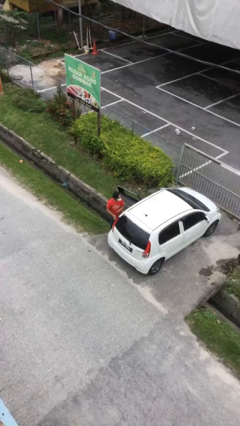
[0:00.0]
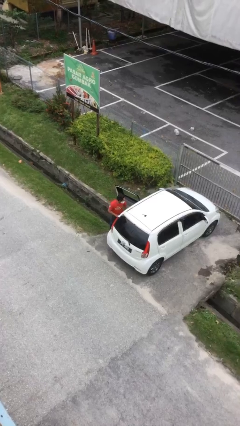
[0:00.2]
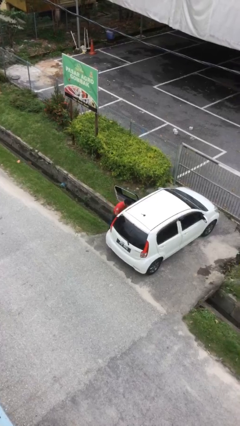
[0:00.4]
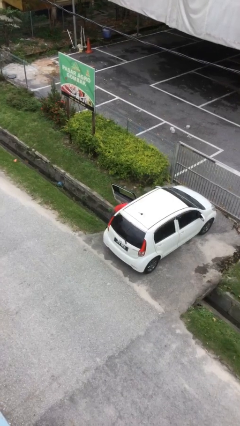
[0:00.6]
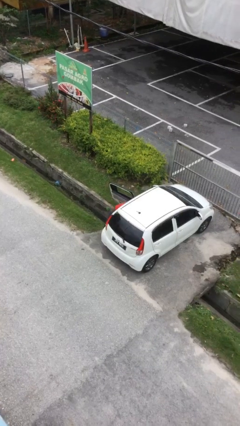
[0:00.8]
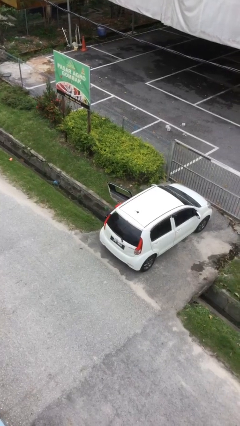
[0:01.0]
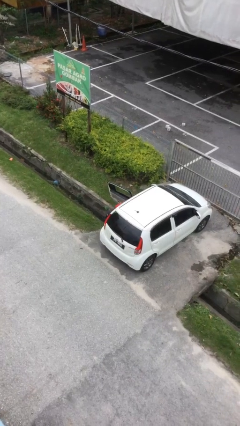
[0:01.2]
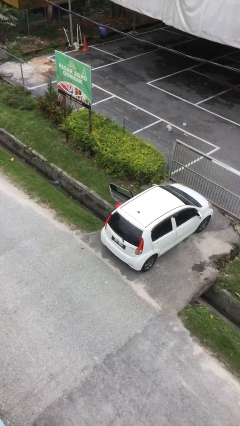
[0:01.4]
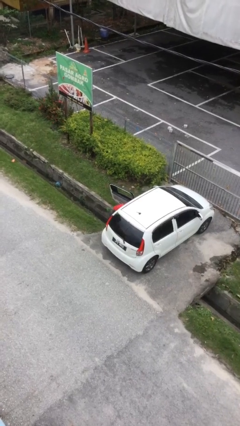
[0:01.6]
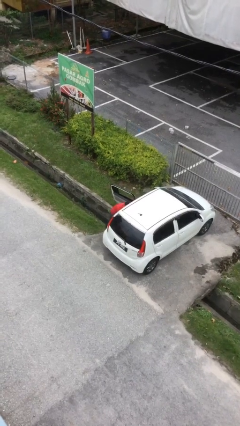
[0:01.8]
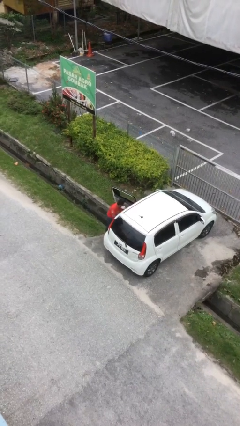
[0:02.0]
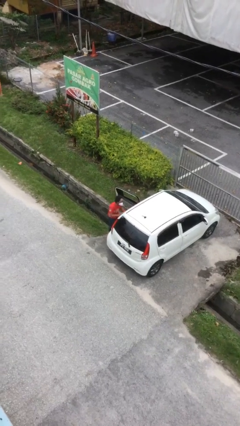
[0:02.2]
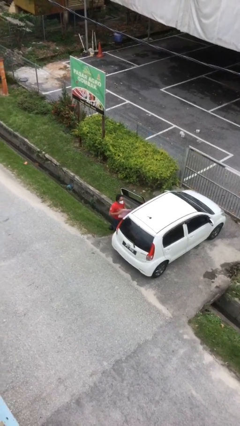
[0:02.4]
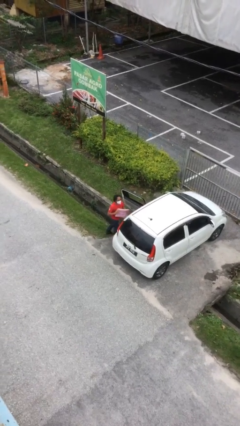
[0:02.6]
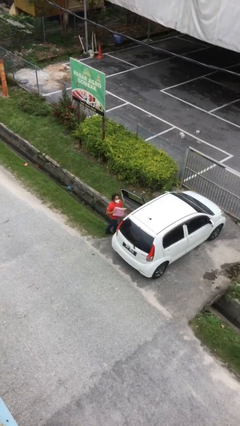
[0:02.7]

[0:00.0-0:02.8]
person unloads car

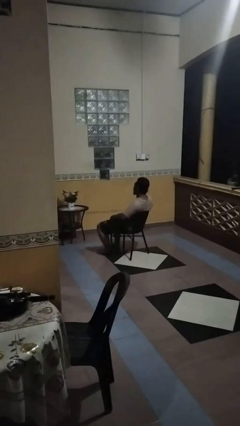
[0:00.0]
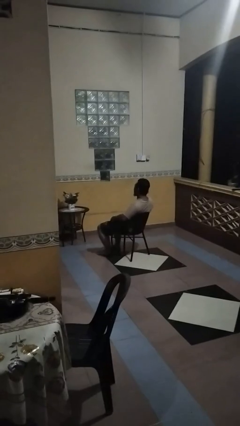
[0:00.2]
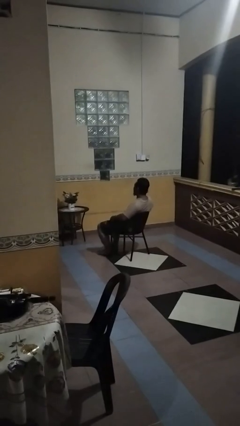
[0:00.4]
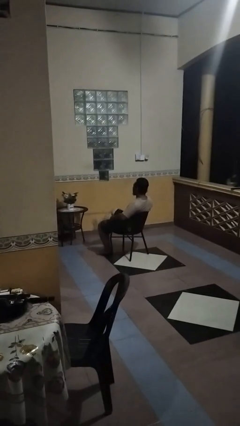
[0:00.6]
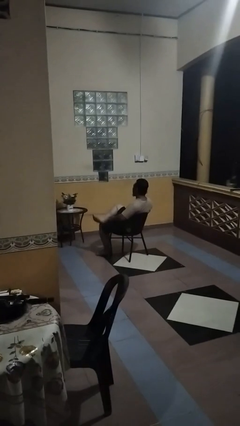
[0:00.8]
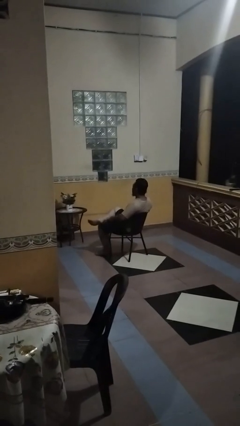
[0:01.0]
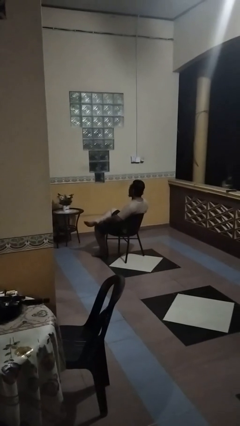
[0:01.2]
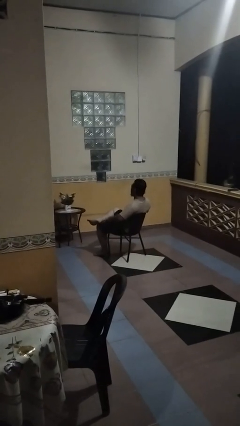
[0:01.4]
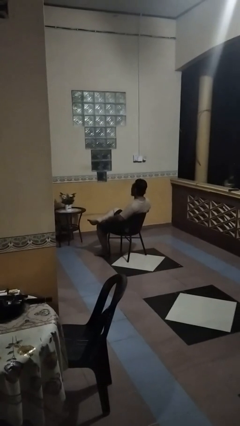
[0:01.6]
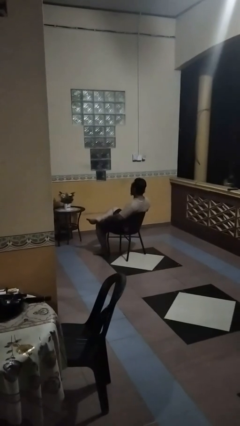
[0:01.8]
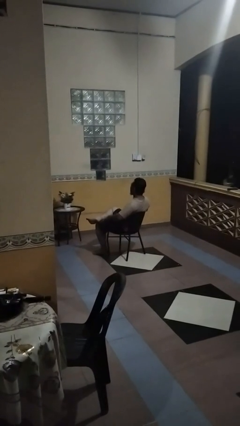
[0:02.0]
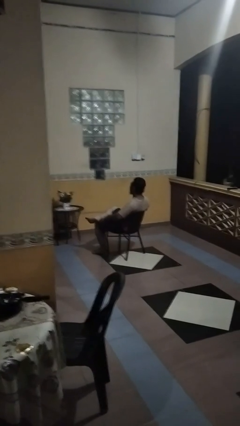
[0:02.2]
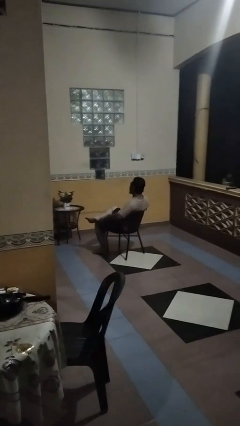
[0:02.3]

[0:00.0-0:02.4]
person crosses legs

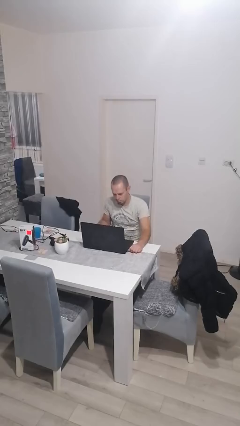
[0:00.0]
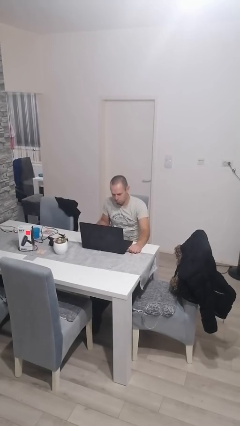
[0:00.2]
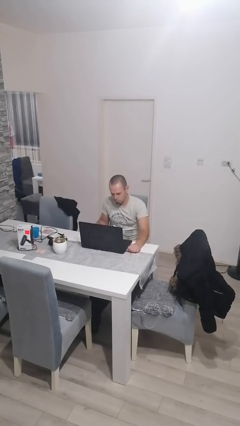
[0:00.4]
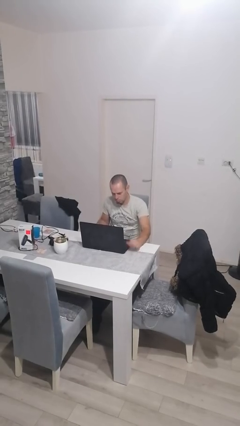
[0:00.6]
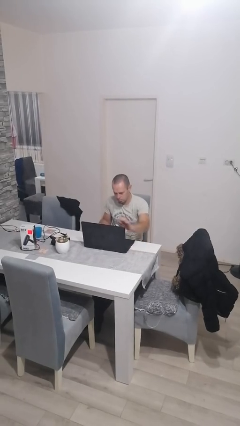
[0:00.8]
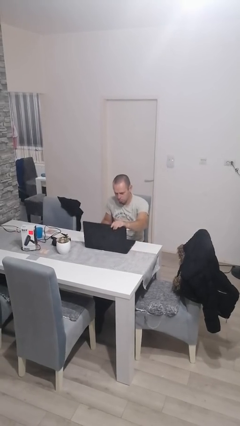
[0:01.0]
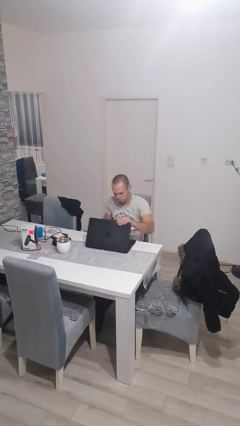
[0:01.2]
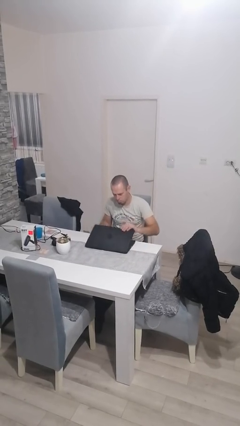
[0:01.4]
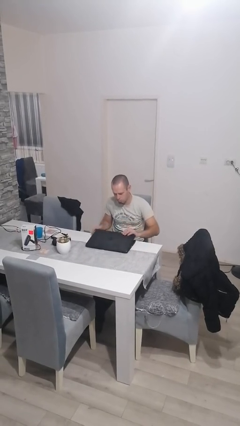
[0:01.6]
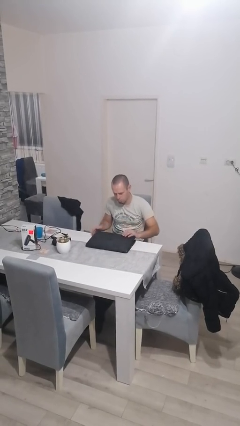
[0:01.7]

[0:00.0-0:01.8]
person closes laptop

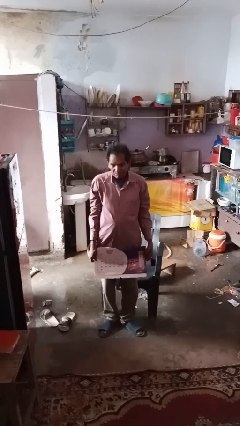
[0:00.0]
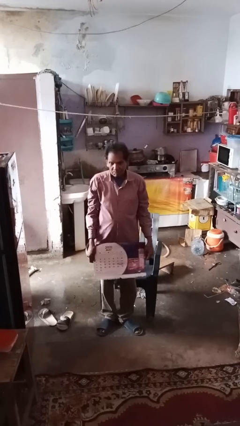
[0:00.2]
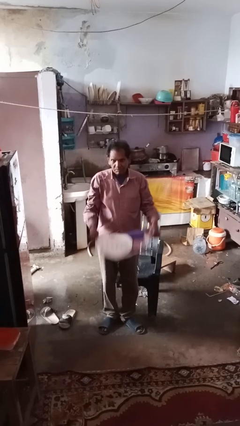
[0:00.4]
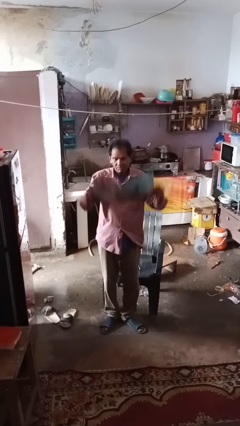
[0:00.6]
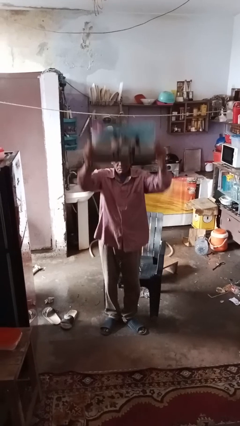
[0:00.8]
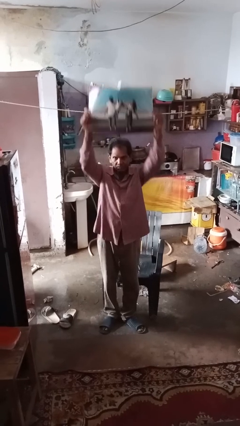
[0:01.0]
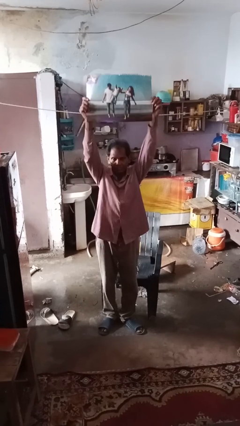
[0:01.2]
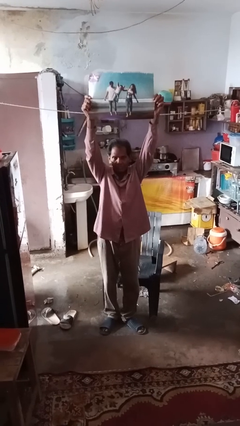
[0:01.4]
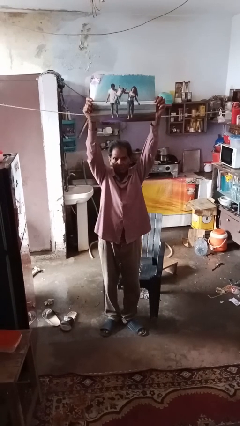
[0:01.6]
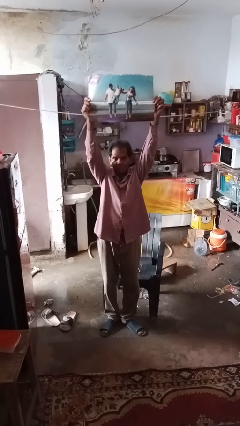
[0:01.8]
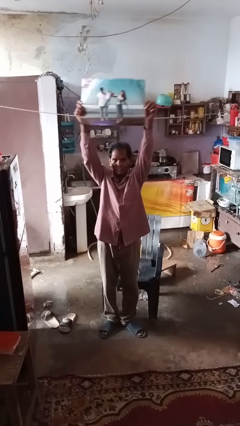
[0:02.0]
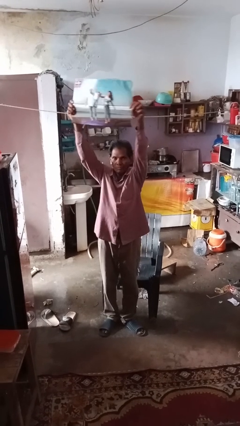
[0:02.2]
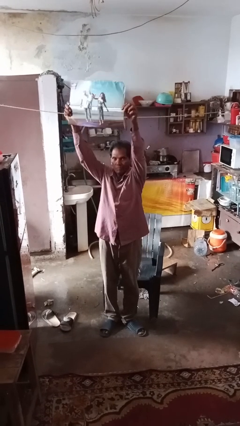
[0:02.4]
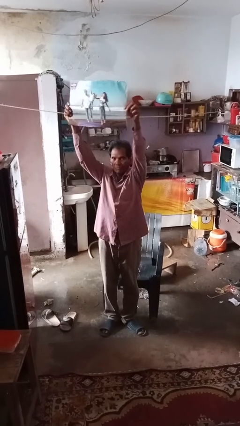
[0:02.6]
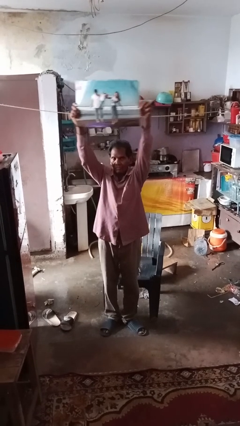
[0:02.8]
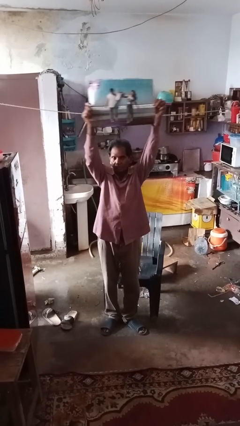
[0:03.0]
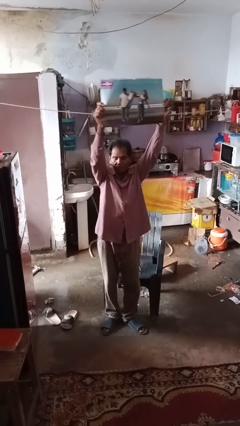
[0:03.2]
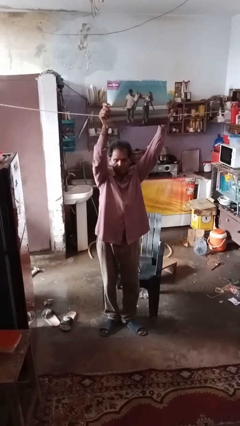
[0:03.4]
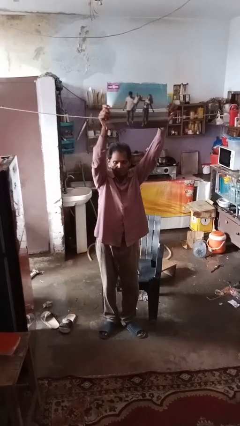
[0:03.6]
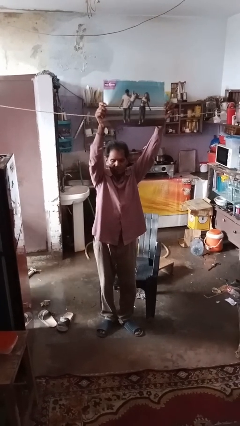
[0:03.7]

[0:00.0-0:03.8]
person holds object above head

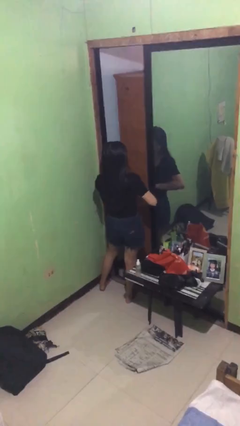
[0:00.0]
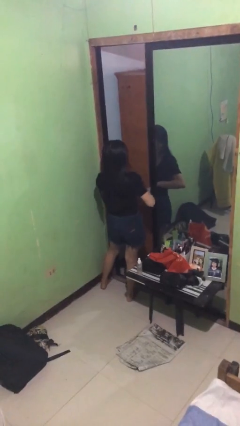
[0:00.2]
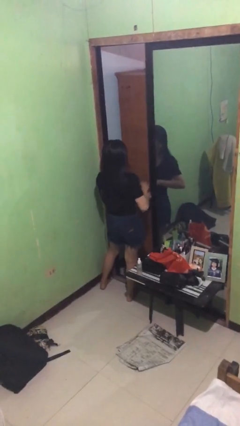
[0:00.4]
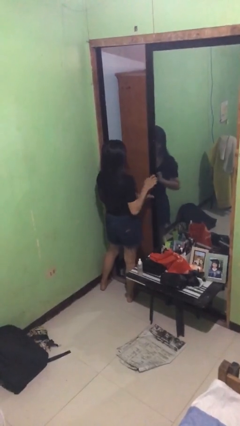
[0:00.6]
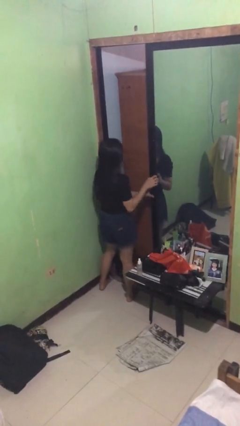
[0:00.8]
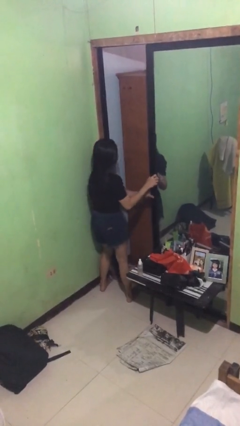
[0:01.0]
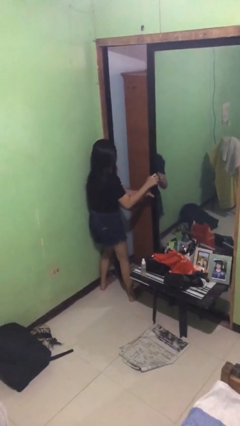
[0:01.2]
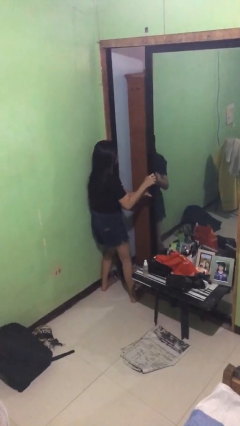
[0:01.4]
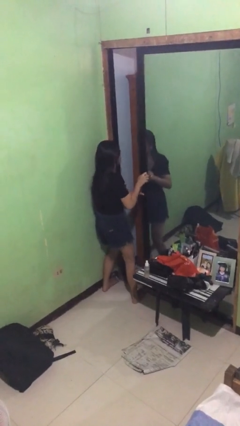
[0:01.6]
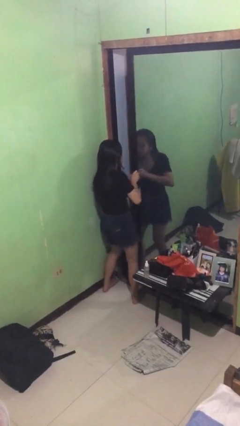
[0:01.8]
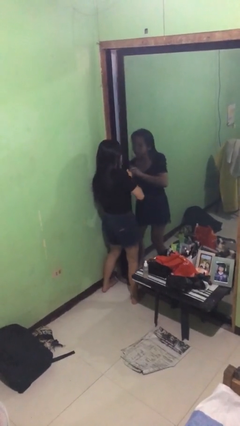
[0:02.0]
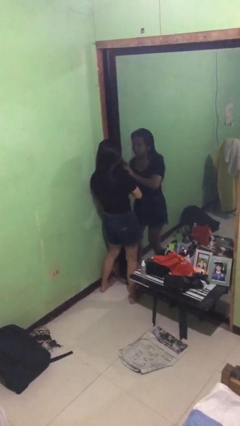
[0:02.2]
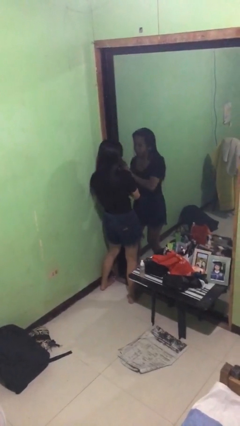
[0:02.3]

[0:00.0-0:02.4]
person closes sliding door

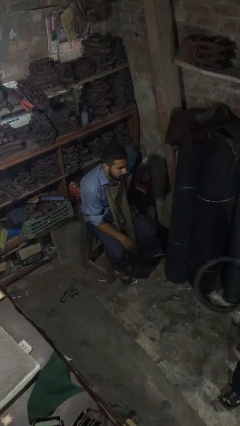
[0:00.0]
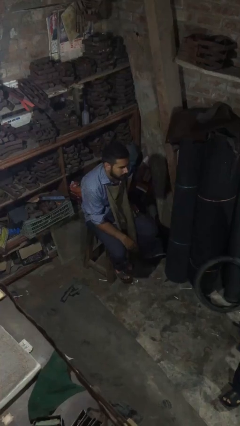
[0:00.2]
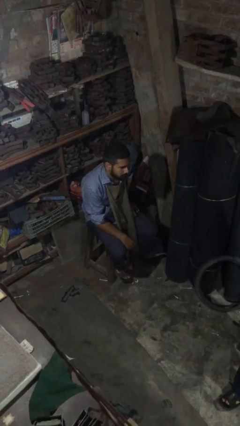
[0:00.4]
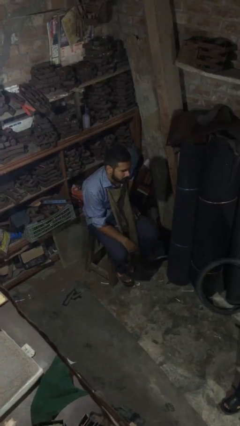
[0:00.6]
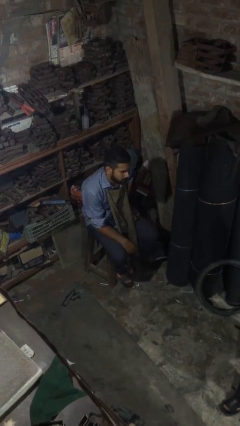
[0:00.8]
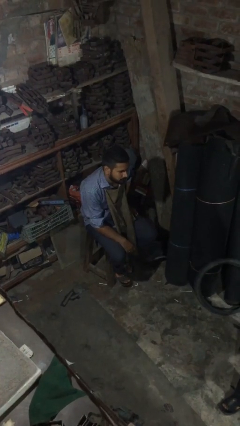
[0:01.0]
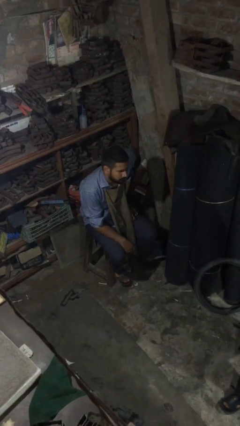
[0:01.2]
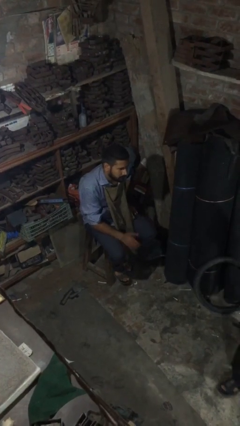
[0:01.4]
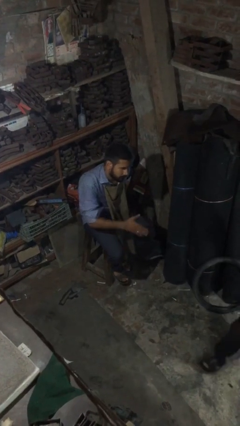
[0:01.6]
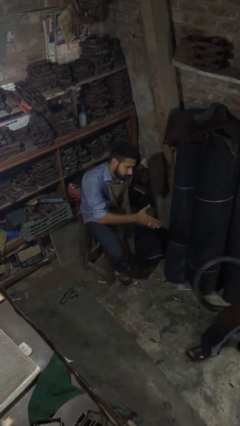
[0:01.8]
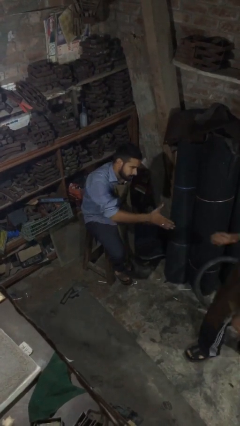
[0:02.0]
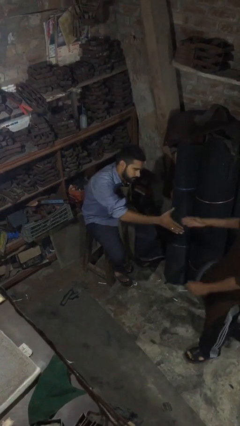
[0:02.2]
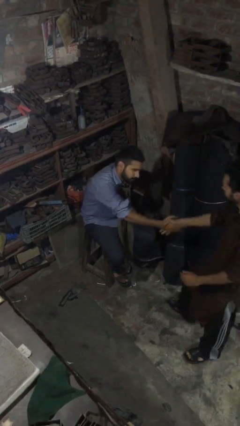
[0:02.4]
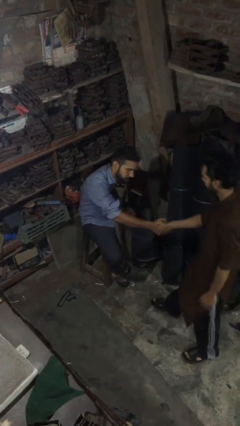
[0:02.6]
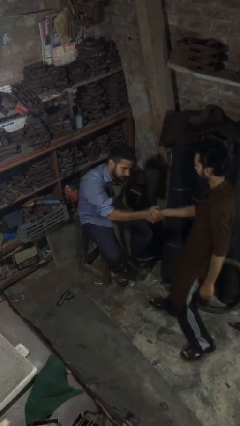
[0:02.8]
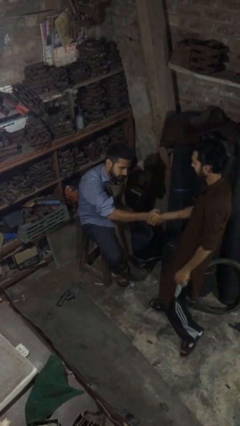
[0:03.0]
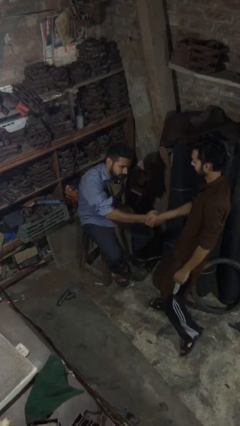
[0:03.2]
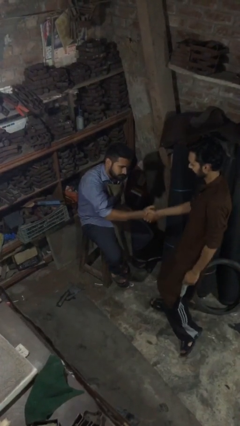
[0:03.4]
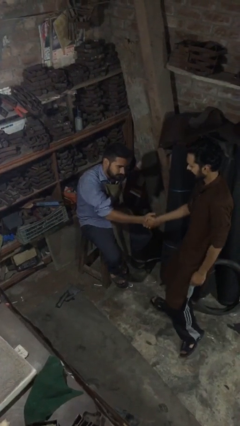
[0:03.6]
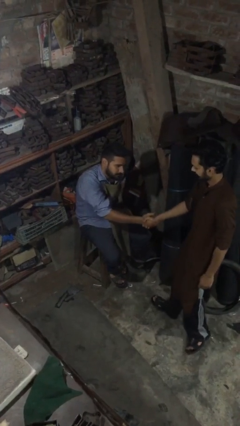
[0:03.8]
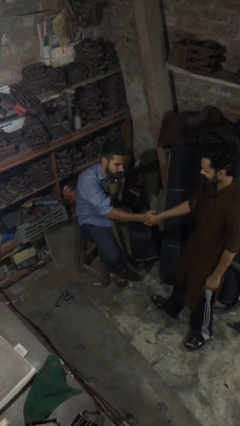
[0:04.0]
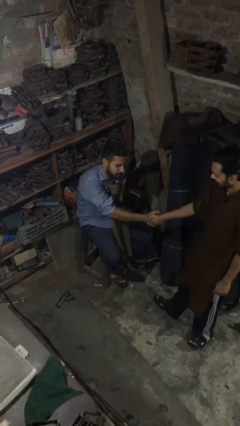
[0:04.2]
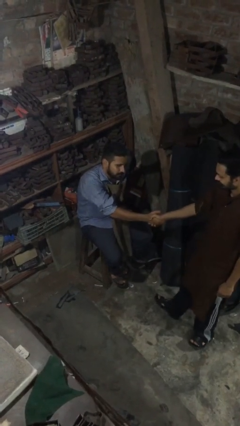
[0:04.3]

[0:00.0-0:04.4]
person shakes hand
